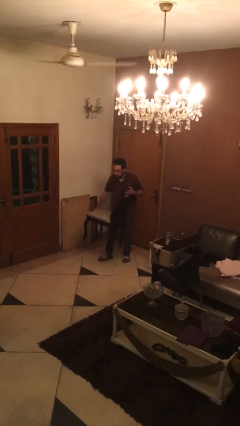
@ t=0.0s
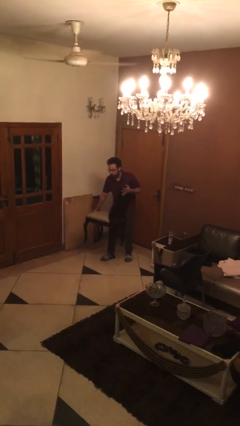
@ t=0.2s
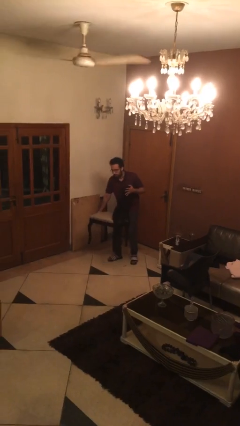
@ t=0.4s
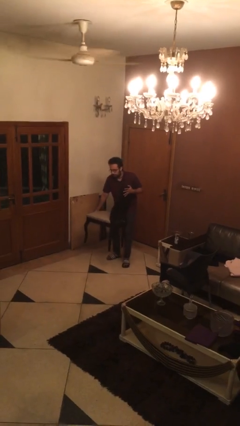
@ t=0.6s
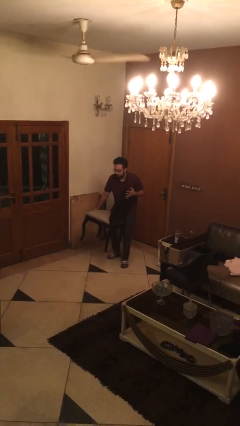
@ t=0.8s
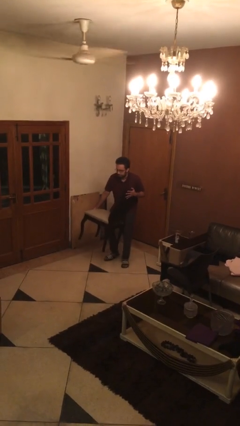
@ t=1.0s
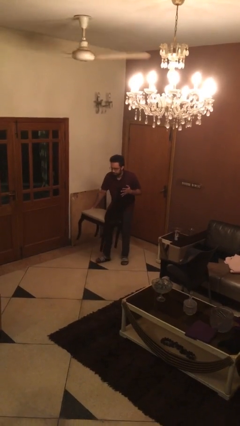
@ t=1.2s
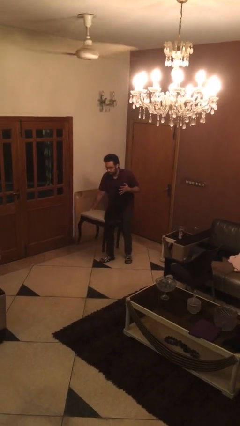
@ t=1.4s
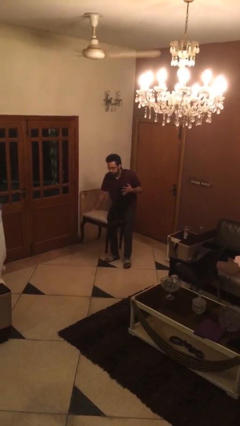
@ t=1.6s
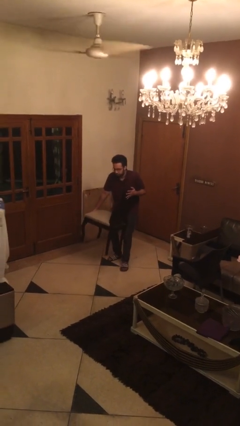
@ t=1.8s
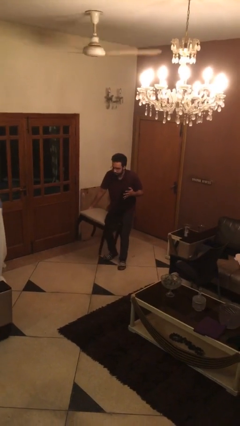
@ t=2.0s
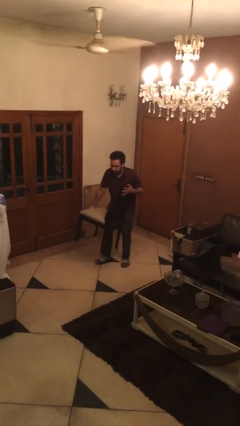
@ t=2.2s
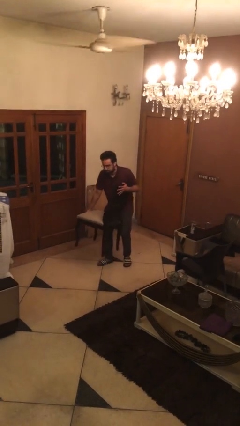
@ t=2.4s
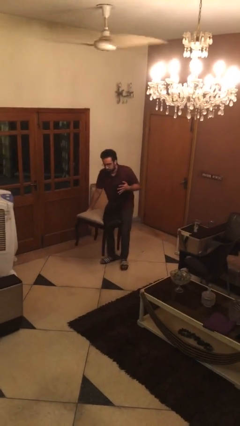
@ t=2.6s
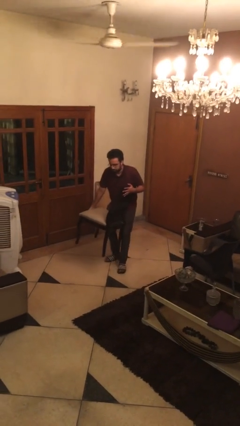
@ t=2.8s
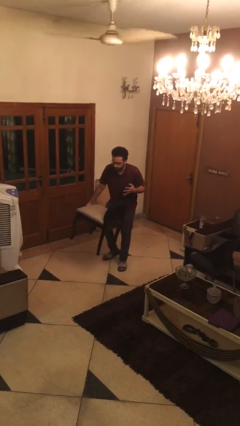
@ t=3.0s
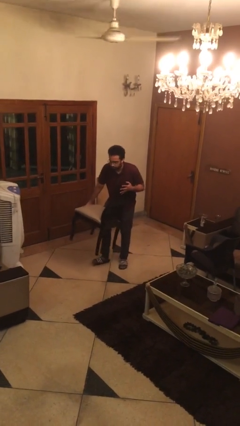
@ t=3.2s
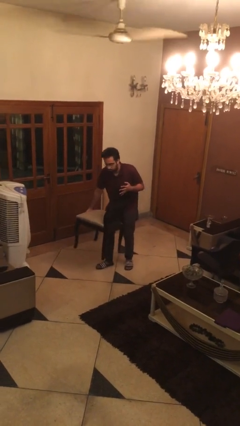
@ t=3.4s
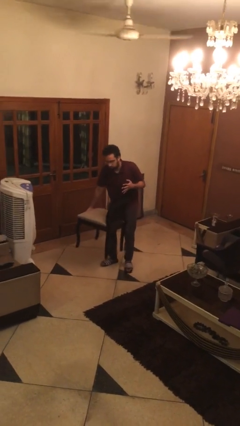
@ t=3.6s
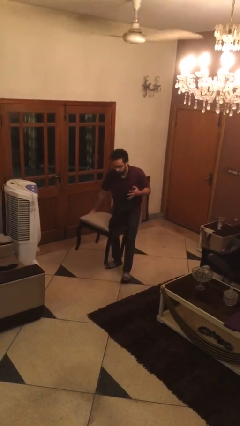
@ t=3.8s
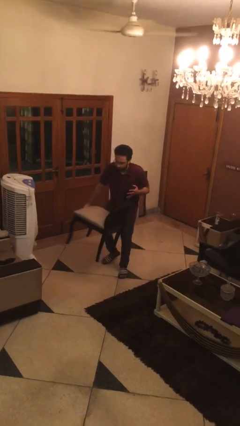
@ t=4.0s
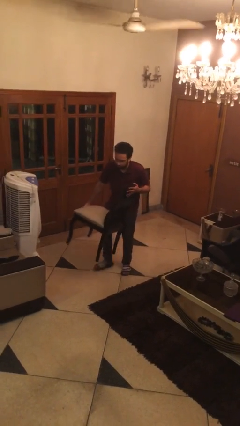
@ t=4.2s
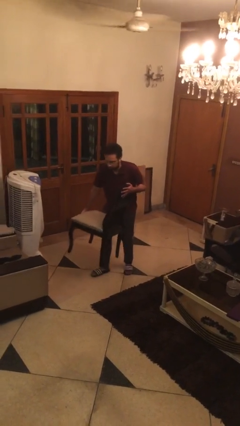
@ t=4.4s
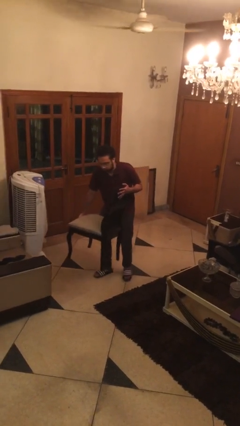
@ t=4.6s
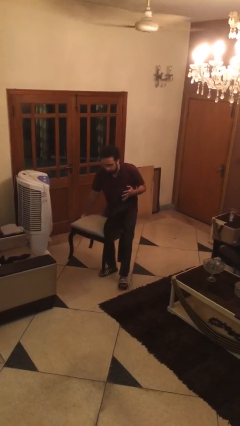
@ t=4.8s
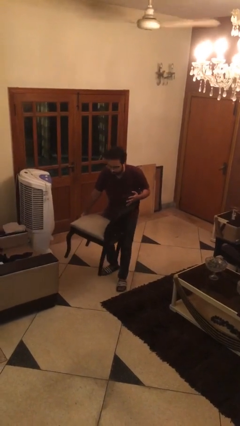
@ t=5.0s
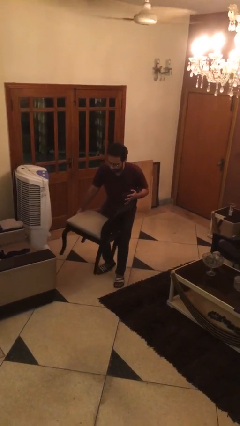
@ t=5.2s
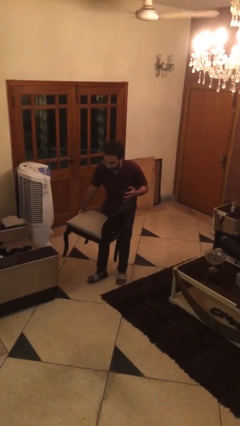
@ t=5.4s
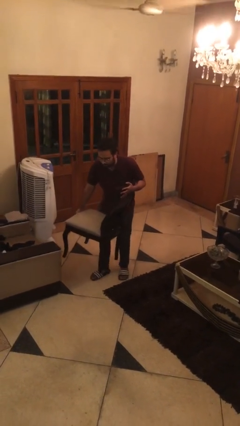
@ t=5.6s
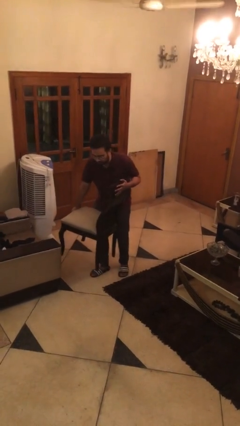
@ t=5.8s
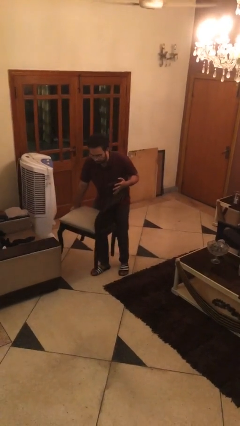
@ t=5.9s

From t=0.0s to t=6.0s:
person carries heavy object

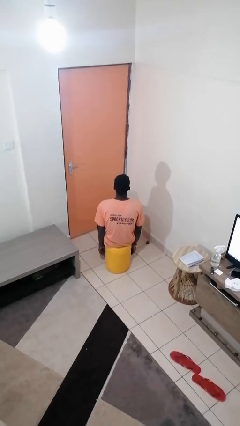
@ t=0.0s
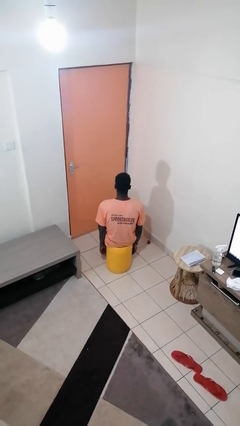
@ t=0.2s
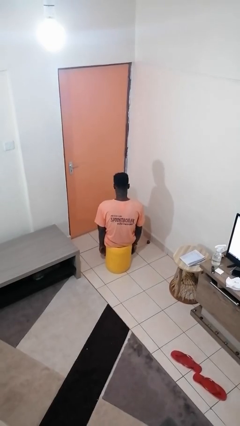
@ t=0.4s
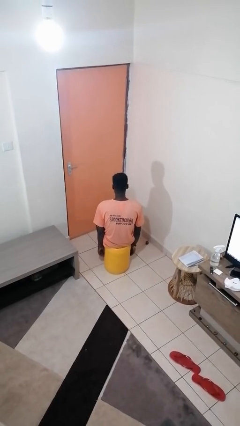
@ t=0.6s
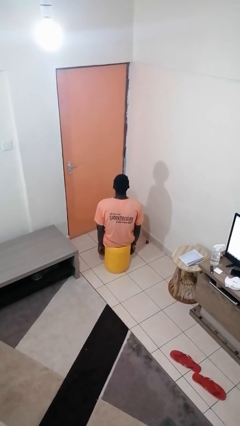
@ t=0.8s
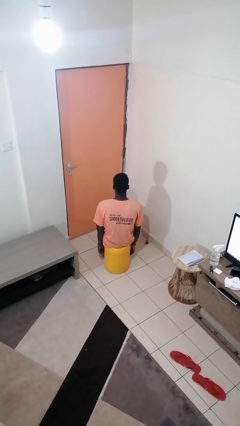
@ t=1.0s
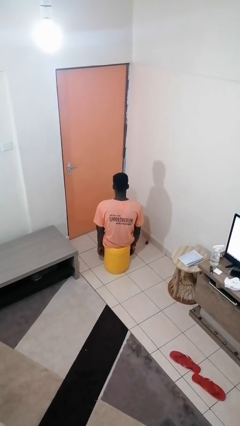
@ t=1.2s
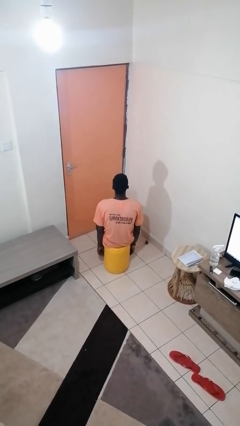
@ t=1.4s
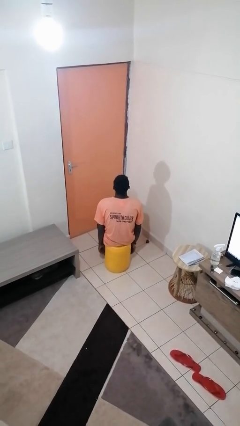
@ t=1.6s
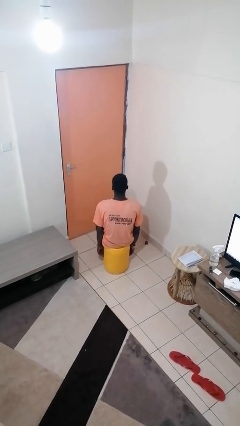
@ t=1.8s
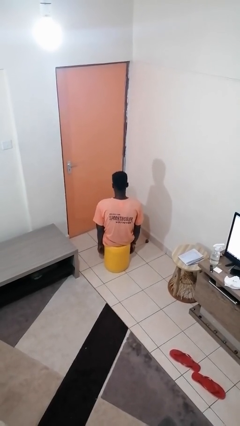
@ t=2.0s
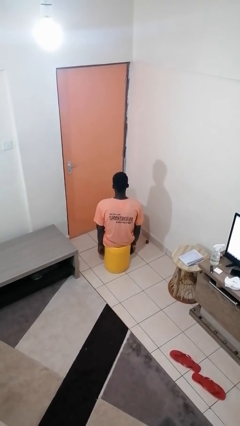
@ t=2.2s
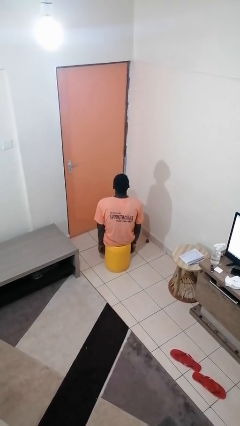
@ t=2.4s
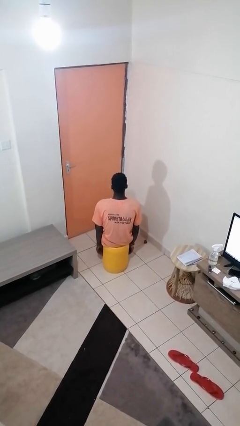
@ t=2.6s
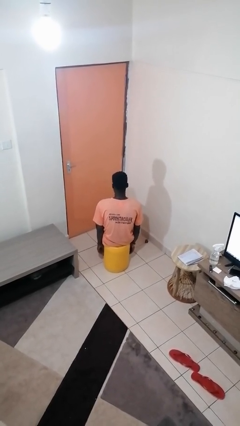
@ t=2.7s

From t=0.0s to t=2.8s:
person nods head

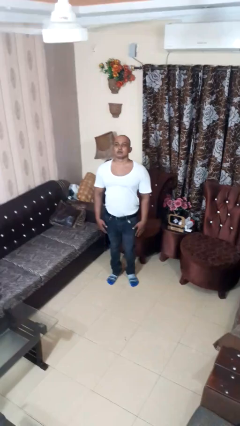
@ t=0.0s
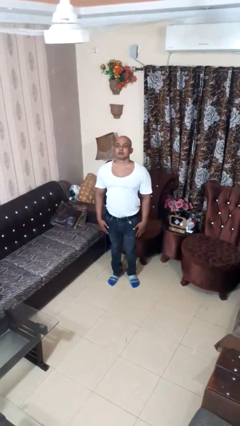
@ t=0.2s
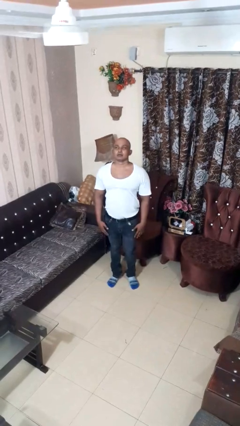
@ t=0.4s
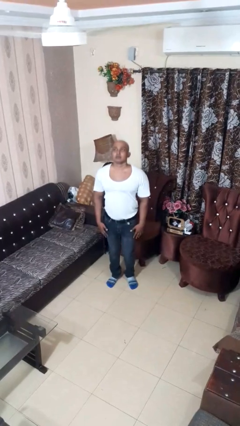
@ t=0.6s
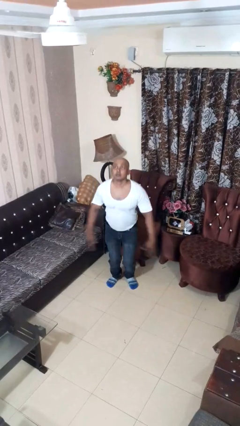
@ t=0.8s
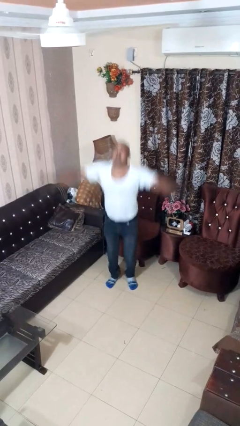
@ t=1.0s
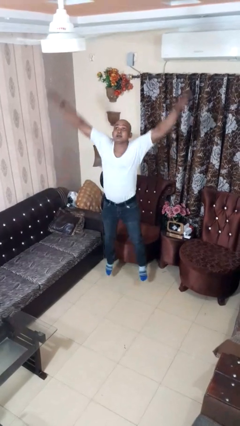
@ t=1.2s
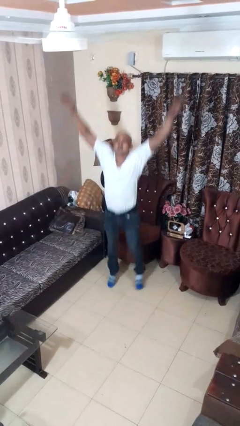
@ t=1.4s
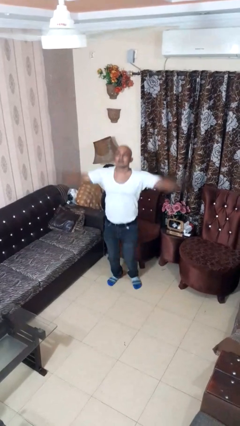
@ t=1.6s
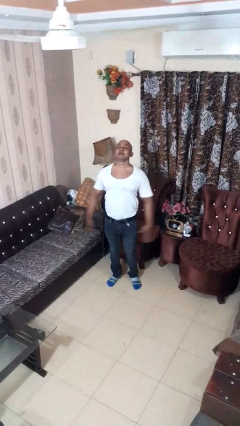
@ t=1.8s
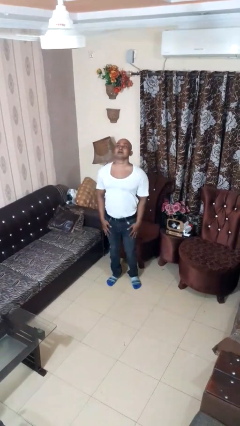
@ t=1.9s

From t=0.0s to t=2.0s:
person exercises with jumping jacks

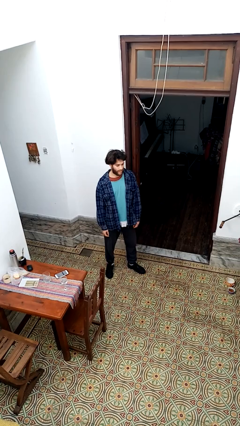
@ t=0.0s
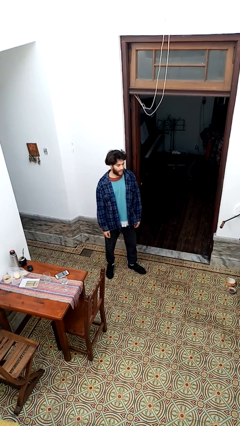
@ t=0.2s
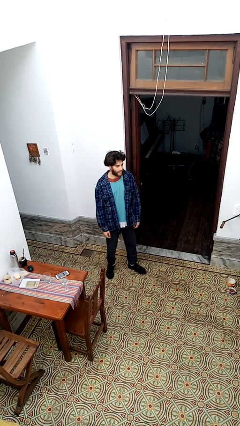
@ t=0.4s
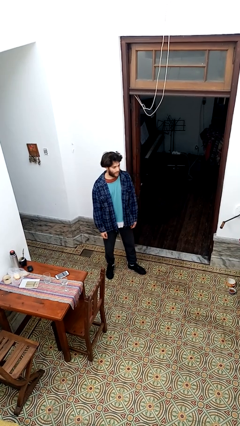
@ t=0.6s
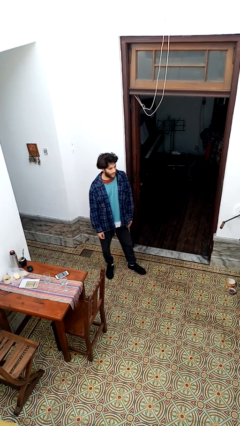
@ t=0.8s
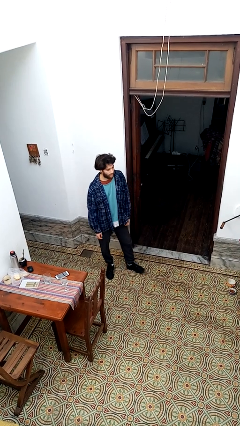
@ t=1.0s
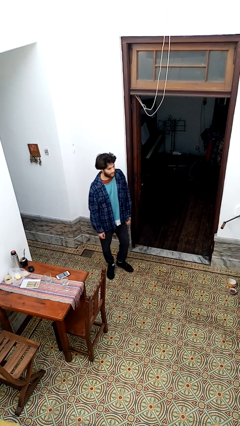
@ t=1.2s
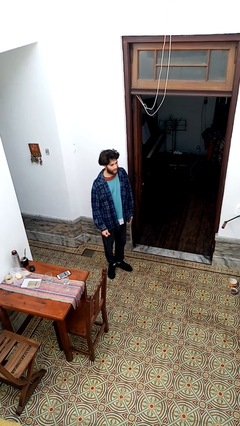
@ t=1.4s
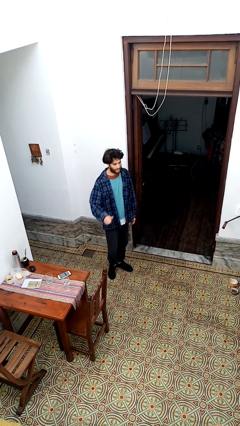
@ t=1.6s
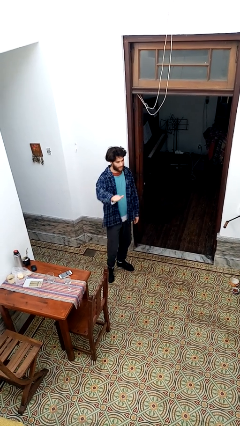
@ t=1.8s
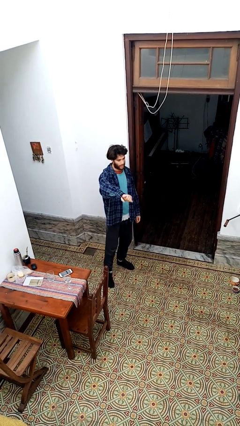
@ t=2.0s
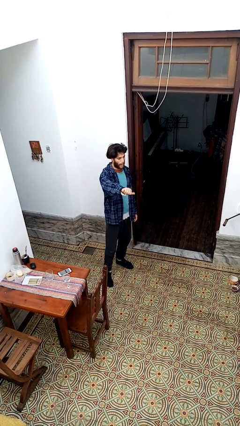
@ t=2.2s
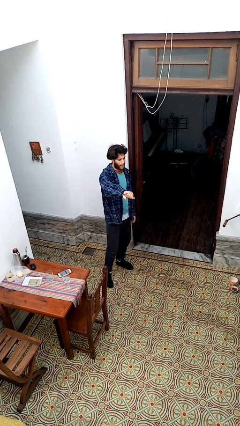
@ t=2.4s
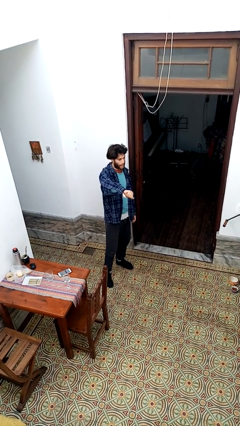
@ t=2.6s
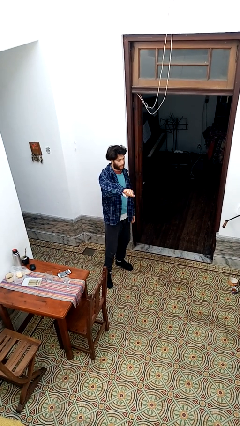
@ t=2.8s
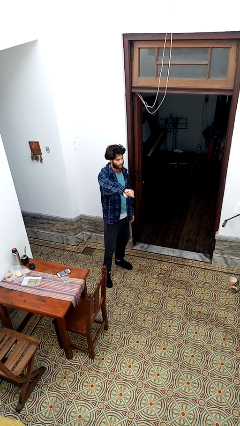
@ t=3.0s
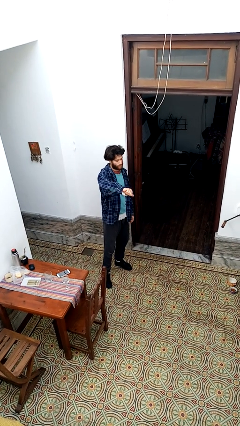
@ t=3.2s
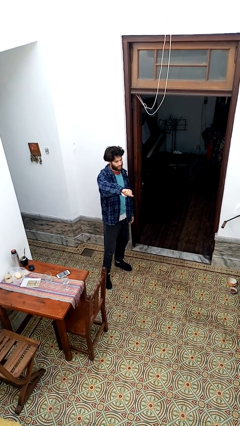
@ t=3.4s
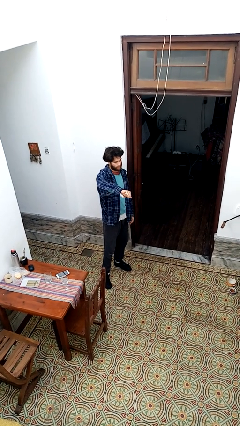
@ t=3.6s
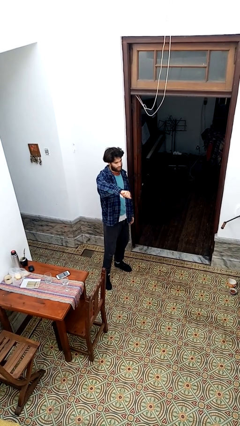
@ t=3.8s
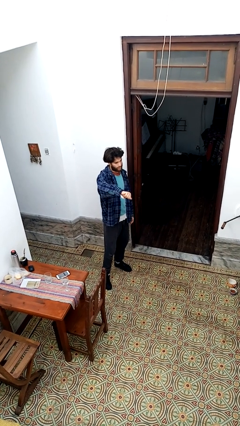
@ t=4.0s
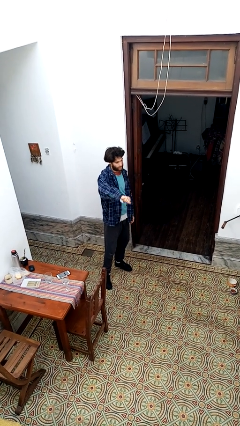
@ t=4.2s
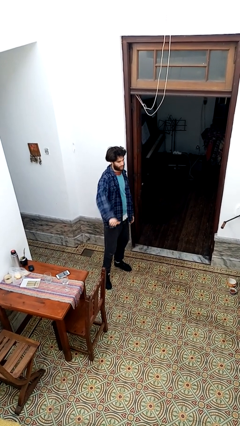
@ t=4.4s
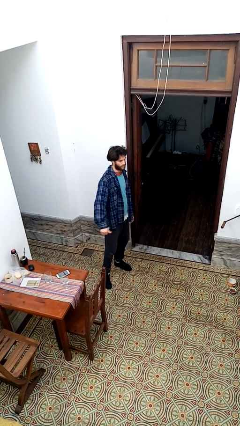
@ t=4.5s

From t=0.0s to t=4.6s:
person gestures thumbs down

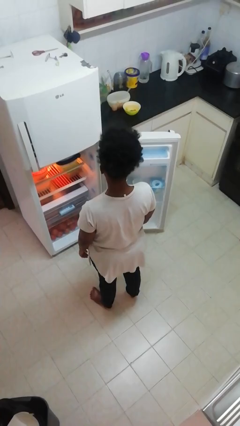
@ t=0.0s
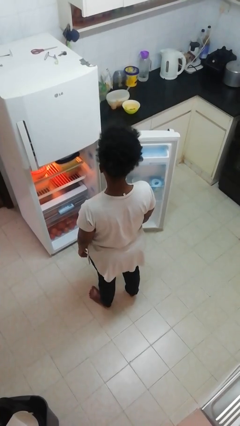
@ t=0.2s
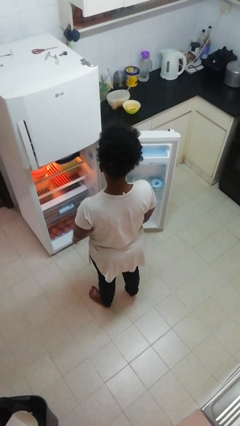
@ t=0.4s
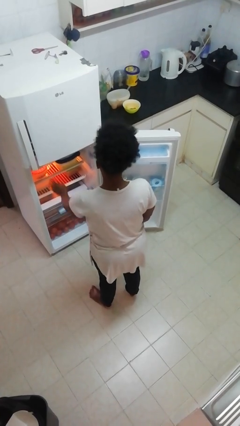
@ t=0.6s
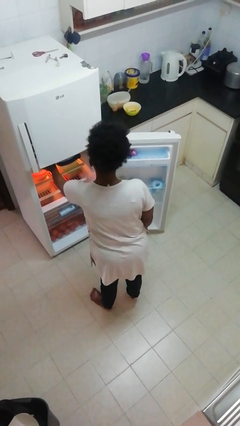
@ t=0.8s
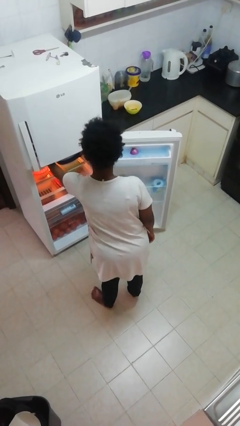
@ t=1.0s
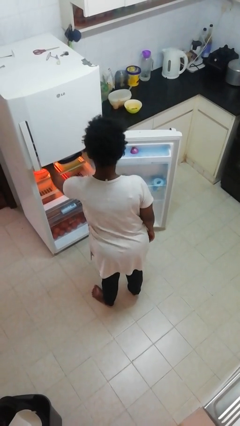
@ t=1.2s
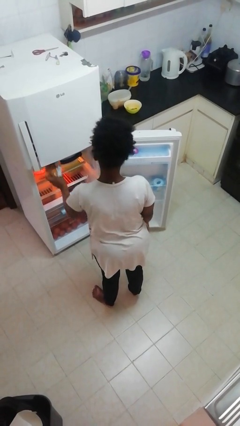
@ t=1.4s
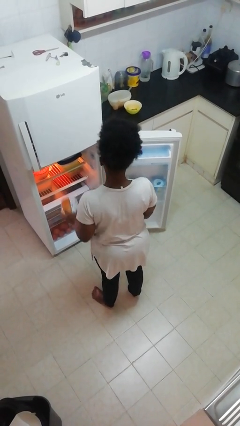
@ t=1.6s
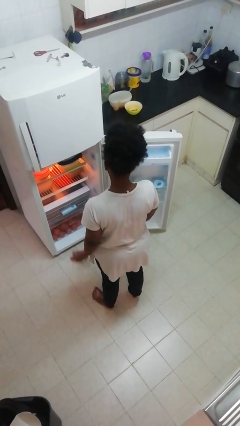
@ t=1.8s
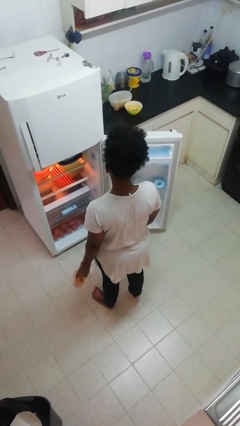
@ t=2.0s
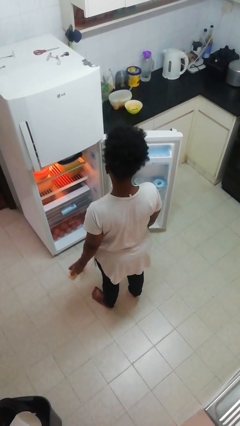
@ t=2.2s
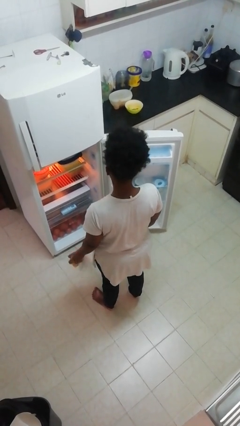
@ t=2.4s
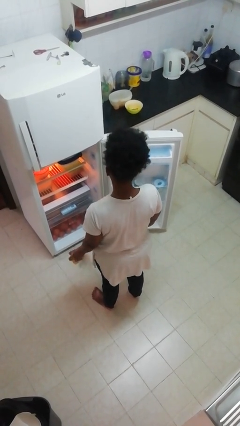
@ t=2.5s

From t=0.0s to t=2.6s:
person takes object from refrigerator
